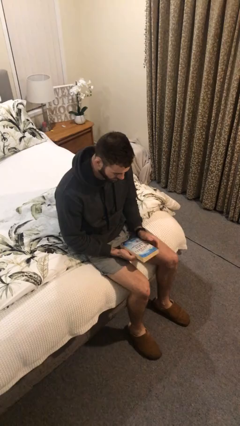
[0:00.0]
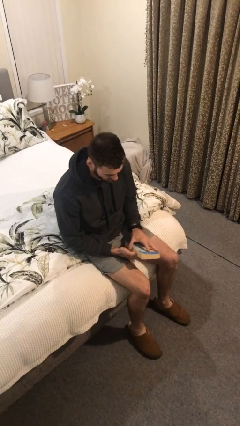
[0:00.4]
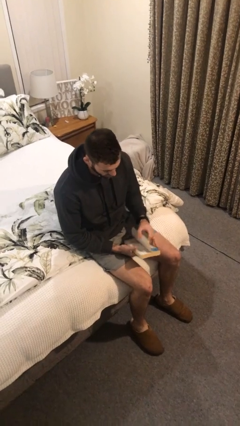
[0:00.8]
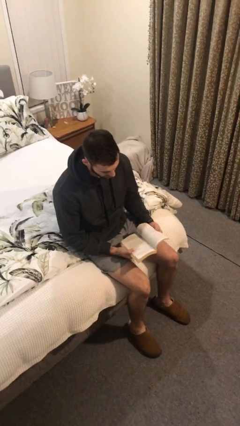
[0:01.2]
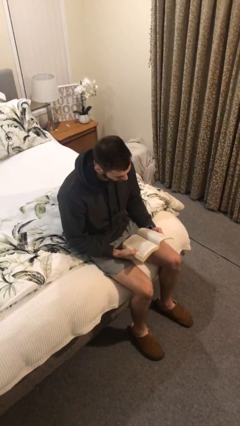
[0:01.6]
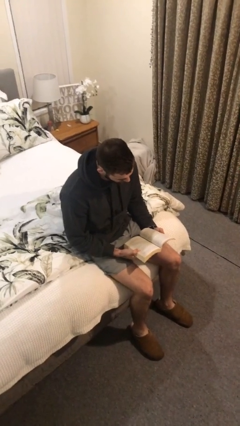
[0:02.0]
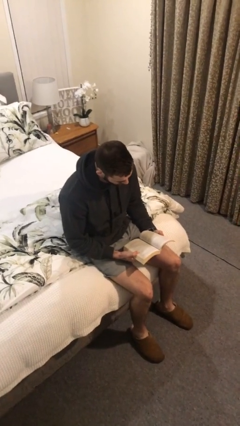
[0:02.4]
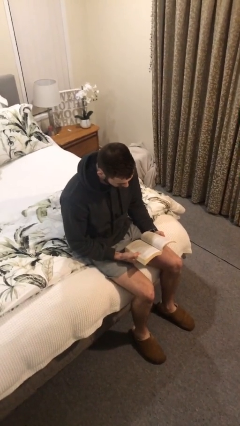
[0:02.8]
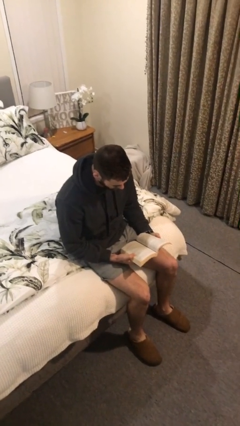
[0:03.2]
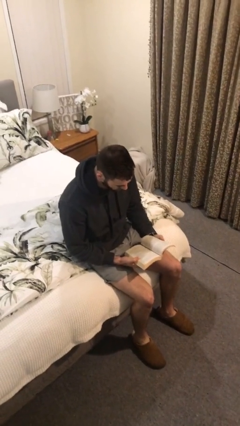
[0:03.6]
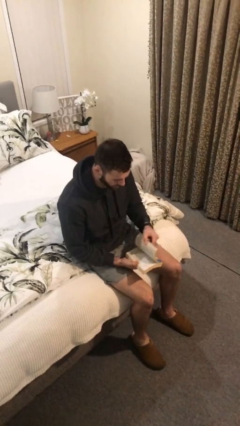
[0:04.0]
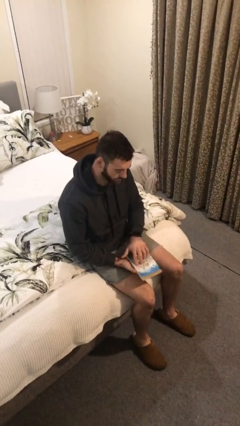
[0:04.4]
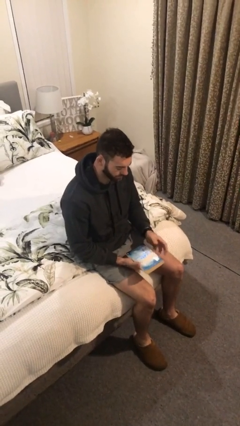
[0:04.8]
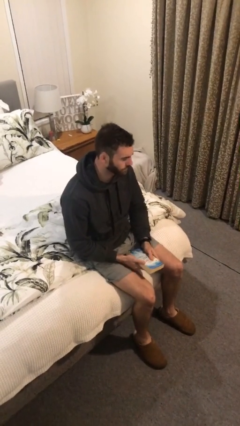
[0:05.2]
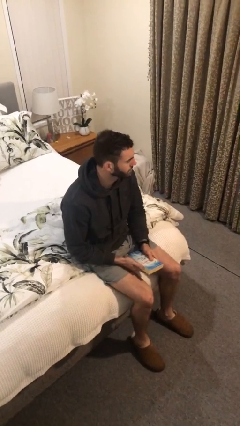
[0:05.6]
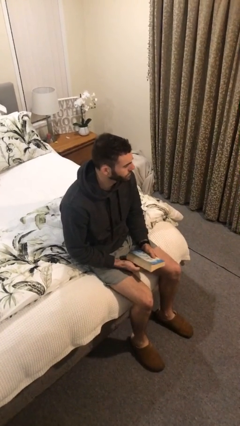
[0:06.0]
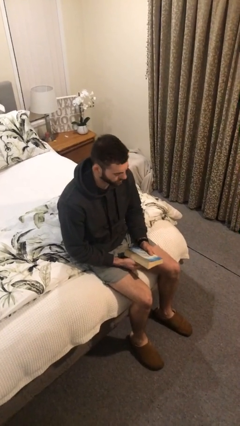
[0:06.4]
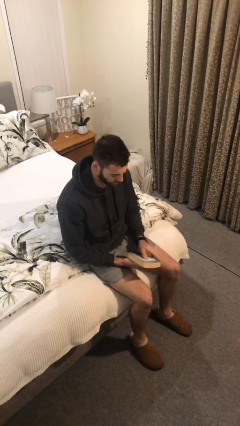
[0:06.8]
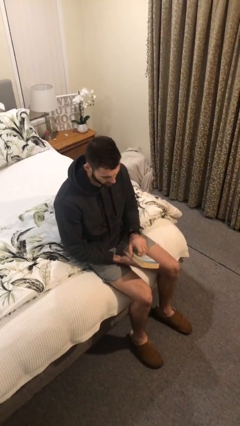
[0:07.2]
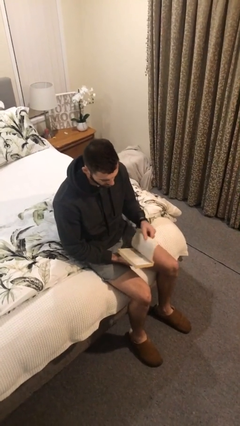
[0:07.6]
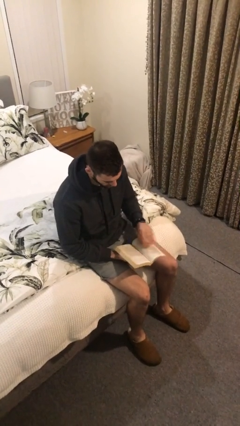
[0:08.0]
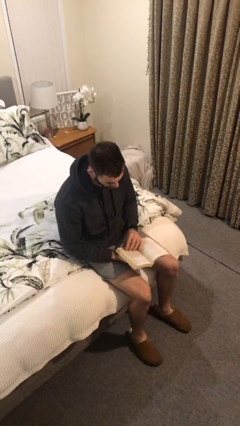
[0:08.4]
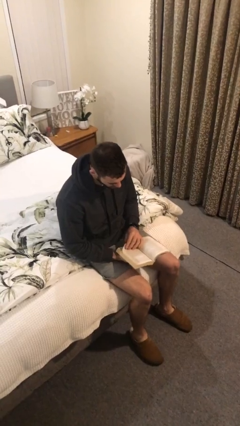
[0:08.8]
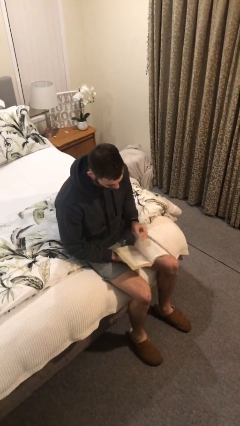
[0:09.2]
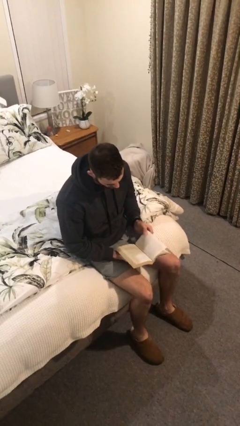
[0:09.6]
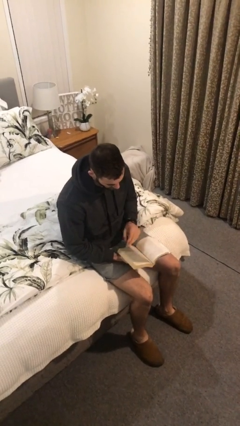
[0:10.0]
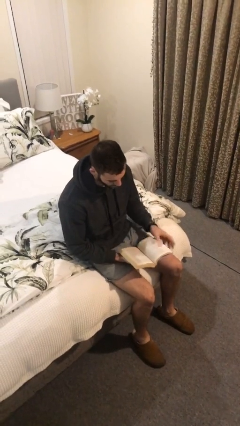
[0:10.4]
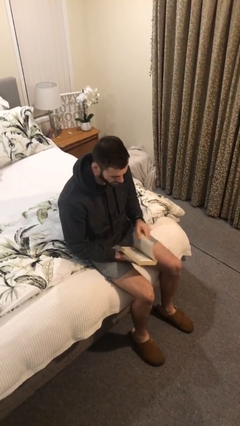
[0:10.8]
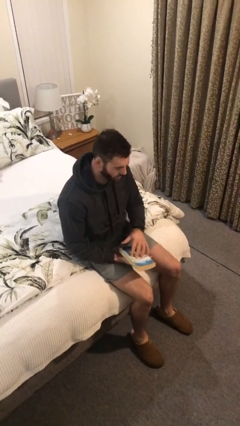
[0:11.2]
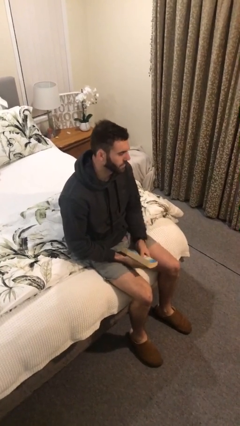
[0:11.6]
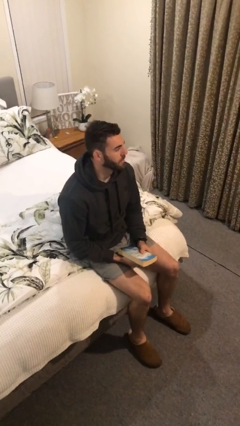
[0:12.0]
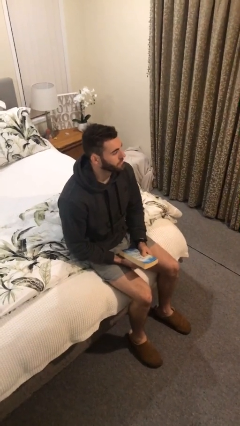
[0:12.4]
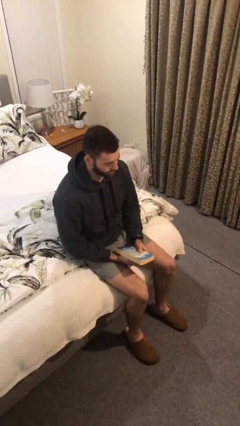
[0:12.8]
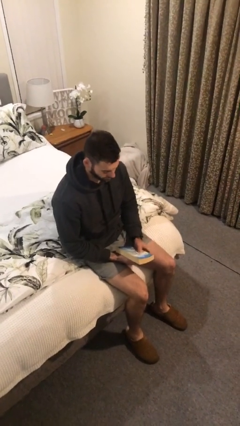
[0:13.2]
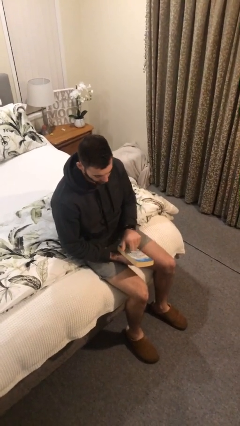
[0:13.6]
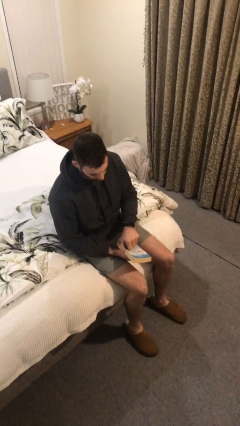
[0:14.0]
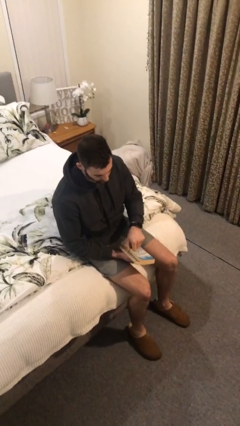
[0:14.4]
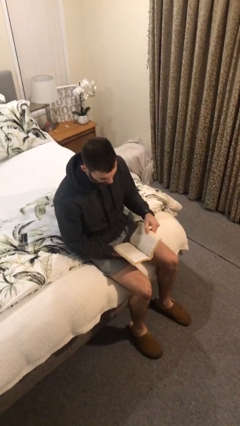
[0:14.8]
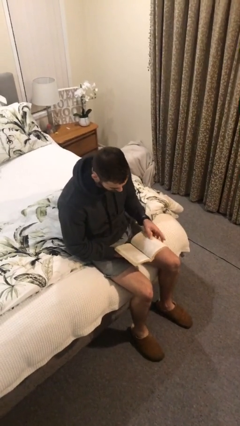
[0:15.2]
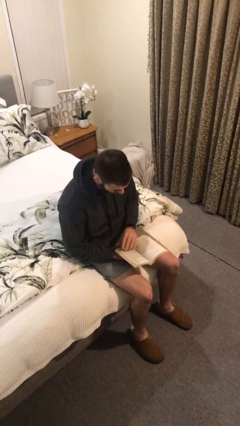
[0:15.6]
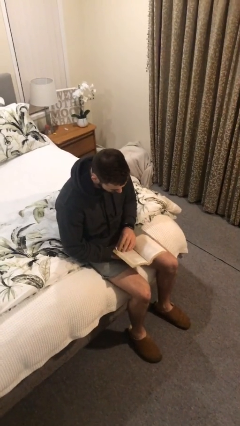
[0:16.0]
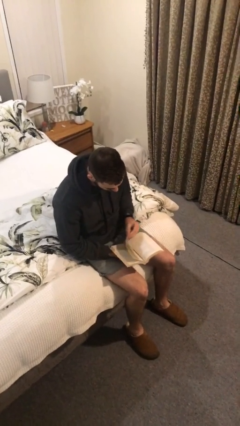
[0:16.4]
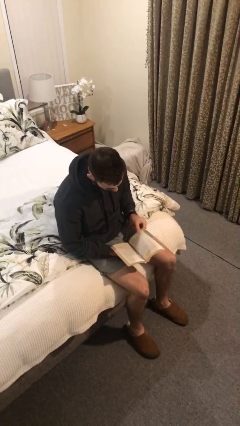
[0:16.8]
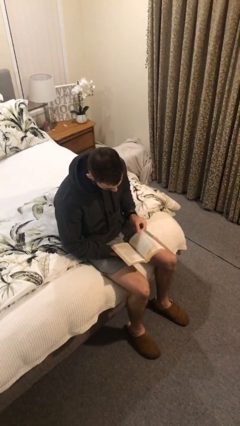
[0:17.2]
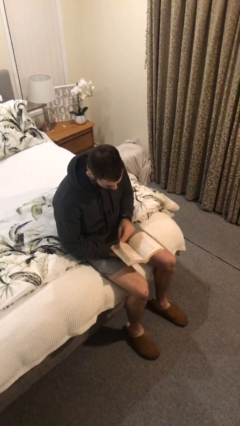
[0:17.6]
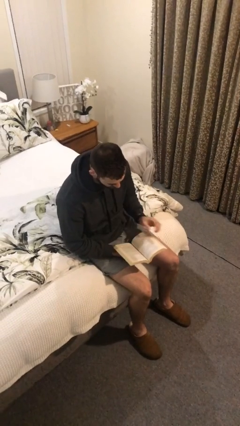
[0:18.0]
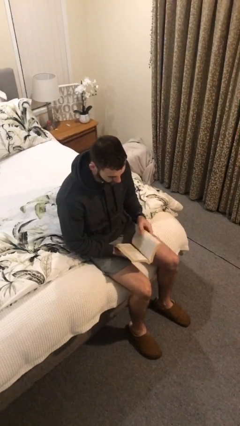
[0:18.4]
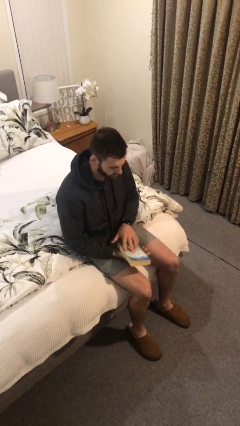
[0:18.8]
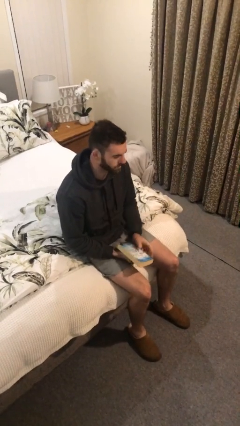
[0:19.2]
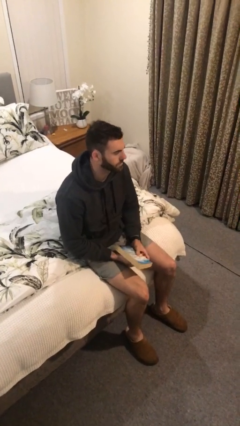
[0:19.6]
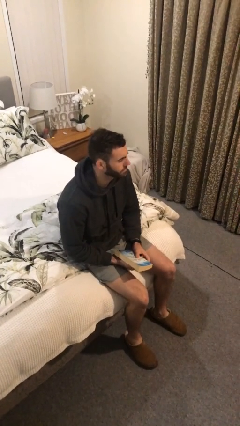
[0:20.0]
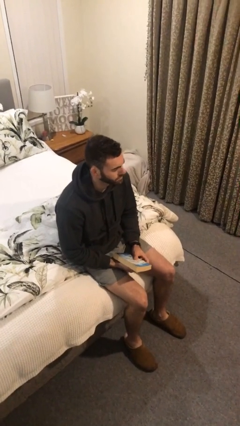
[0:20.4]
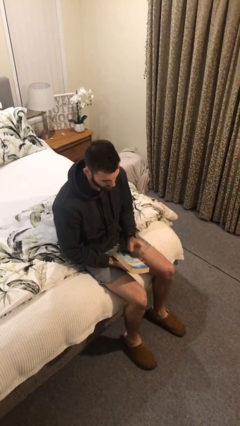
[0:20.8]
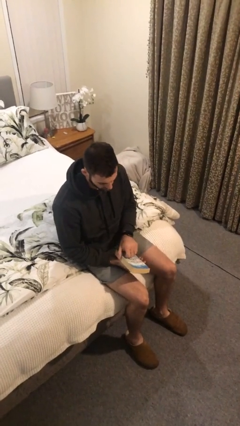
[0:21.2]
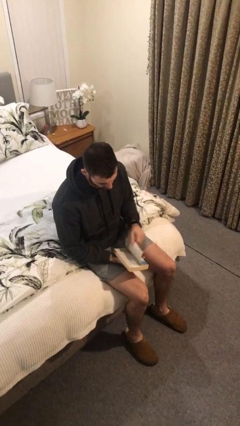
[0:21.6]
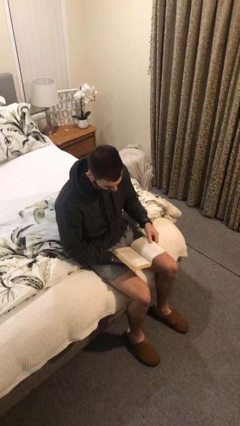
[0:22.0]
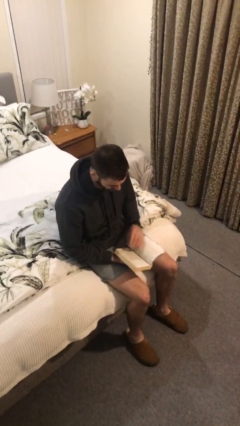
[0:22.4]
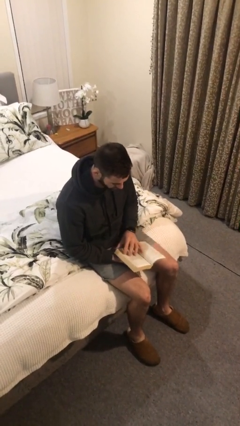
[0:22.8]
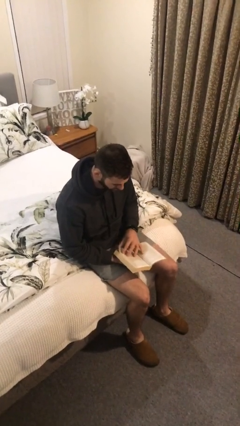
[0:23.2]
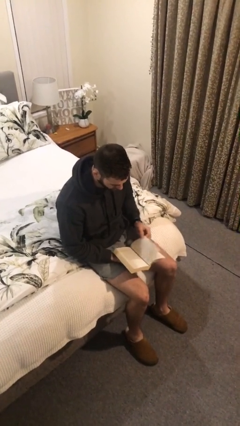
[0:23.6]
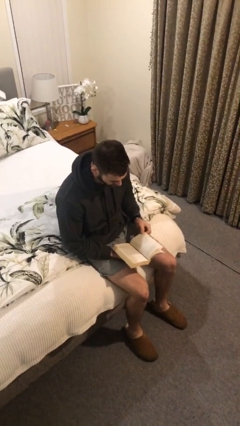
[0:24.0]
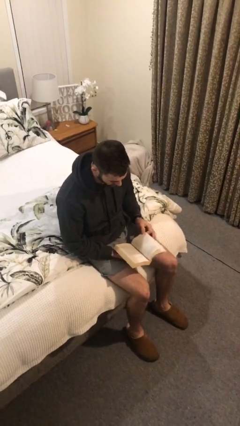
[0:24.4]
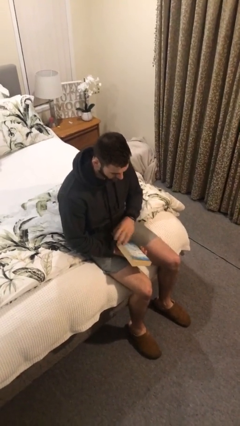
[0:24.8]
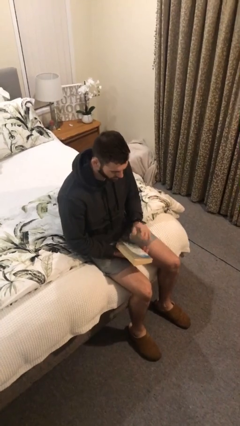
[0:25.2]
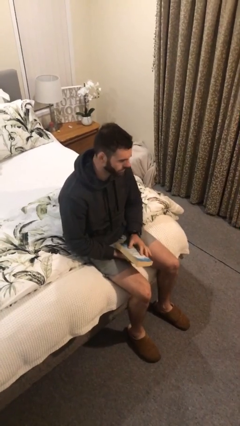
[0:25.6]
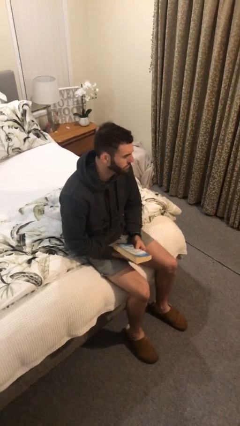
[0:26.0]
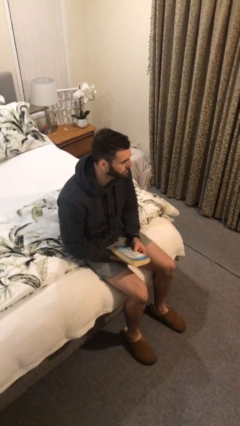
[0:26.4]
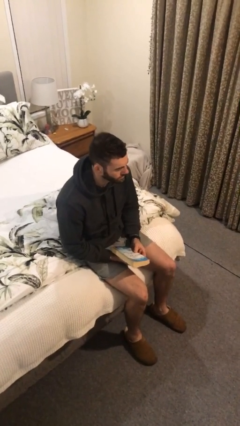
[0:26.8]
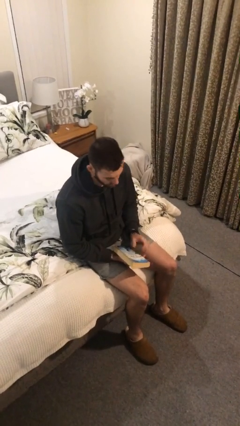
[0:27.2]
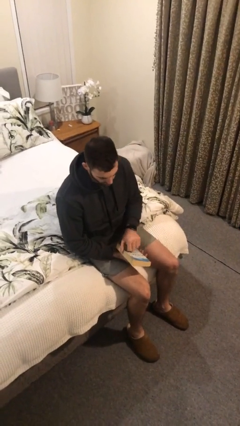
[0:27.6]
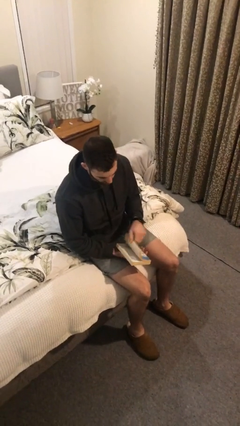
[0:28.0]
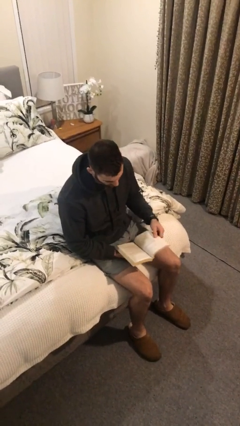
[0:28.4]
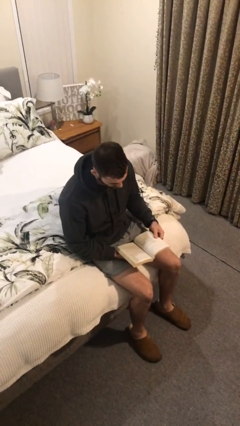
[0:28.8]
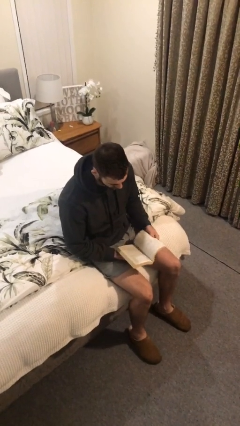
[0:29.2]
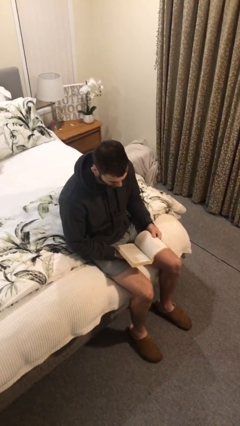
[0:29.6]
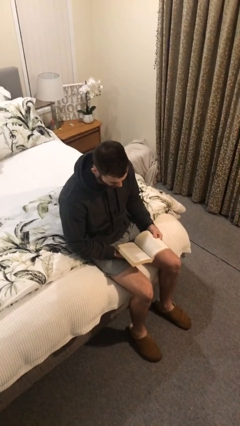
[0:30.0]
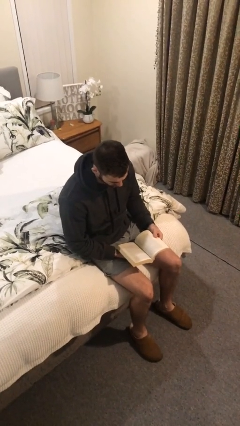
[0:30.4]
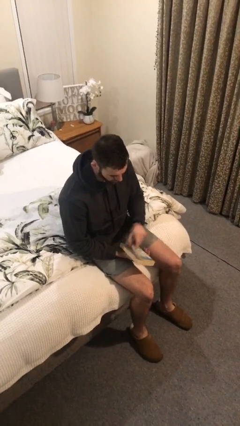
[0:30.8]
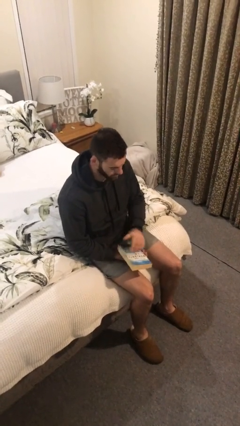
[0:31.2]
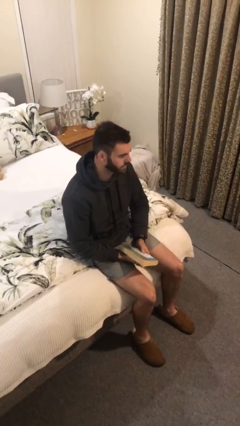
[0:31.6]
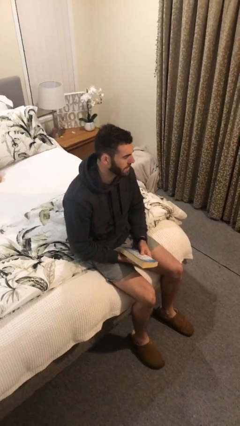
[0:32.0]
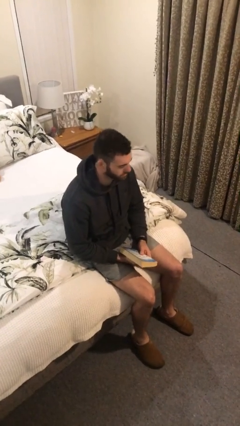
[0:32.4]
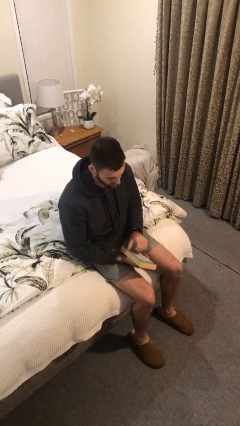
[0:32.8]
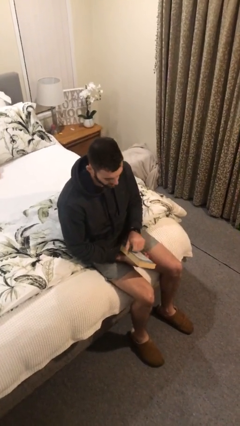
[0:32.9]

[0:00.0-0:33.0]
person reads book

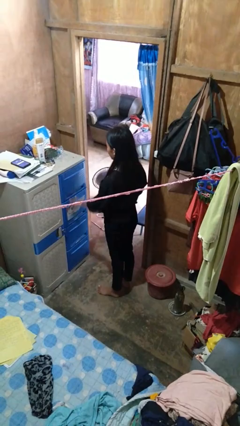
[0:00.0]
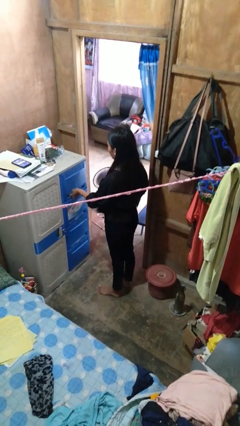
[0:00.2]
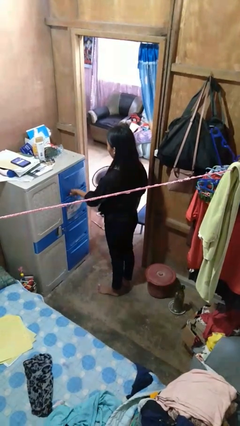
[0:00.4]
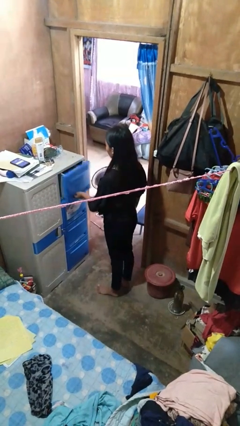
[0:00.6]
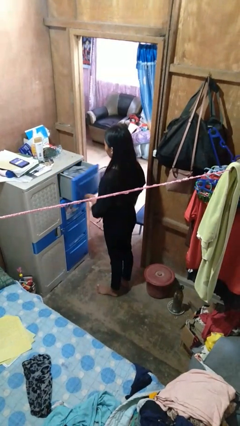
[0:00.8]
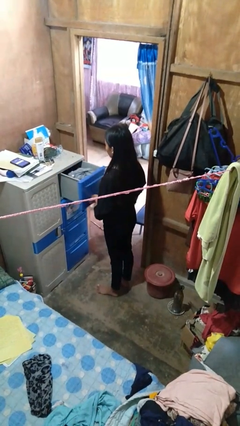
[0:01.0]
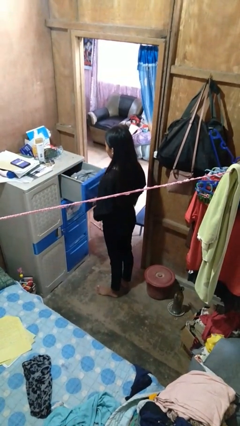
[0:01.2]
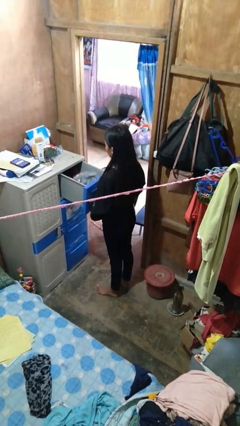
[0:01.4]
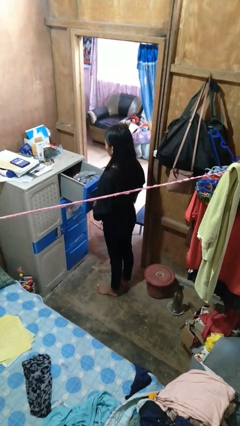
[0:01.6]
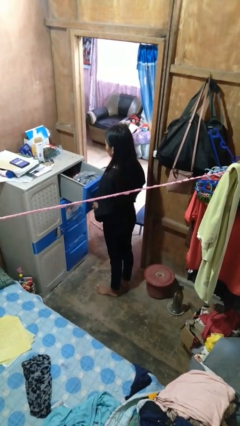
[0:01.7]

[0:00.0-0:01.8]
person opens dresser drawer
